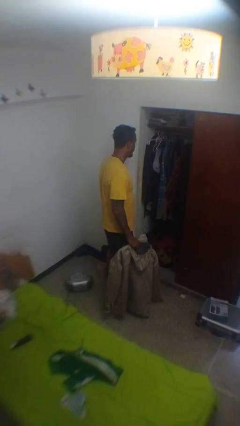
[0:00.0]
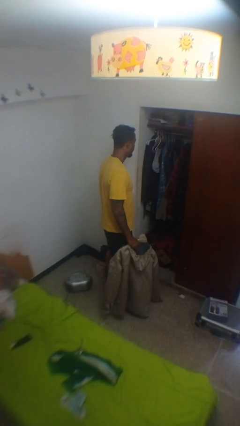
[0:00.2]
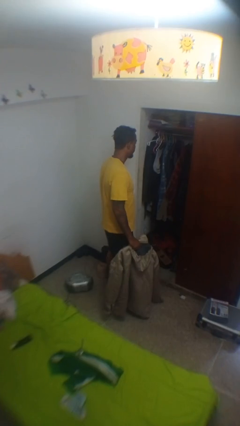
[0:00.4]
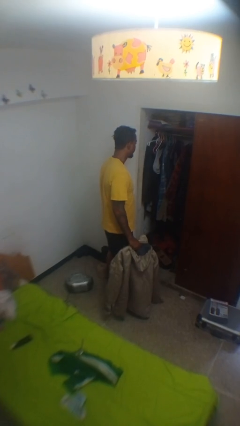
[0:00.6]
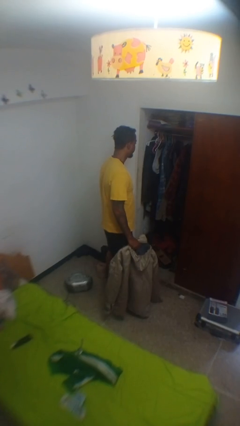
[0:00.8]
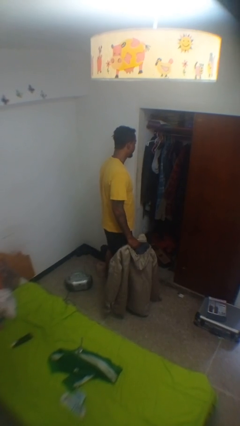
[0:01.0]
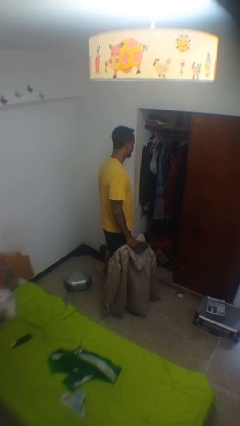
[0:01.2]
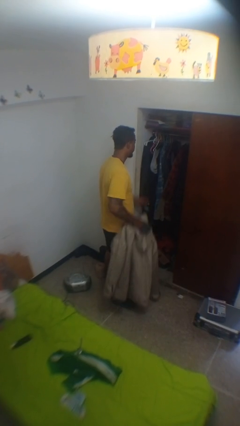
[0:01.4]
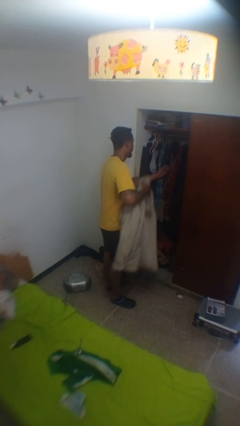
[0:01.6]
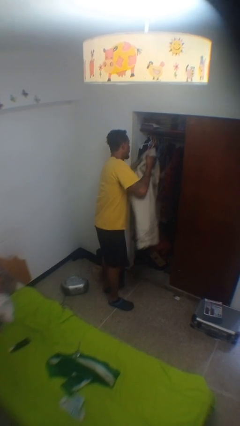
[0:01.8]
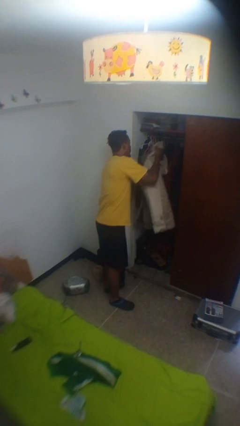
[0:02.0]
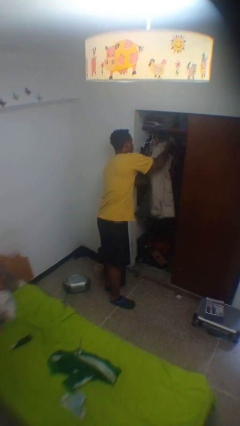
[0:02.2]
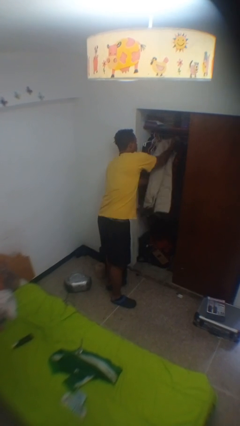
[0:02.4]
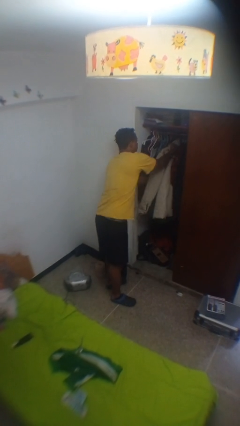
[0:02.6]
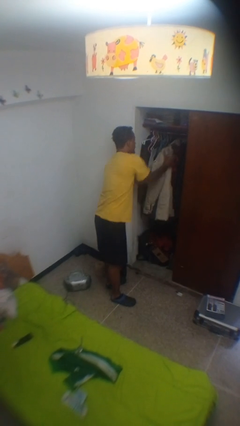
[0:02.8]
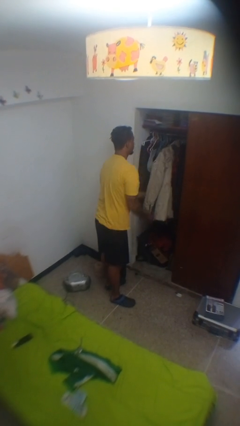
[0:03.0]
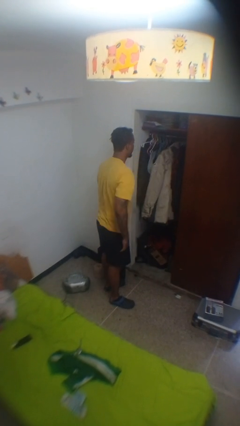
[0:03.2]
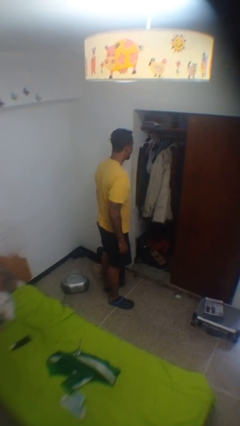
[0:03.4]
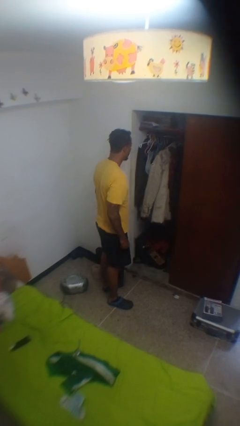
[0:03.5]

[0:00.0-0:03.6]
person puts clothes into closet

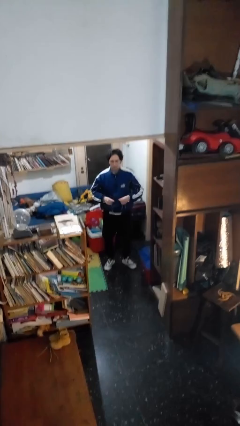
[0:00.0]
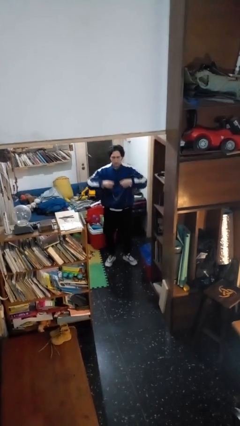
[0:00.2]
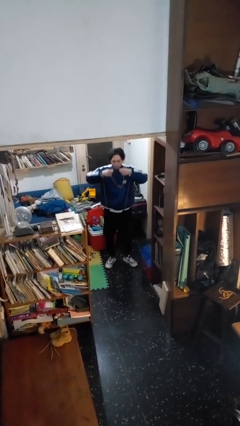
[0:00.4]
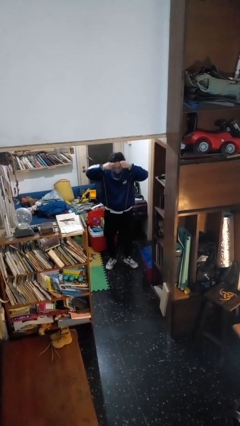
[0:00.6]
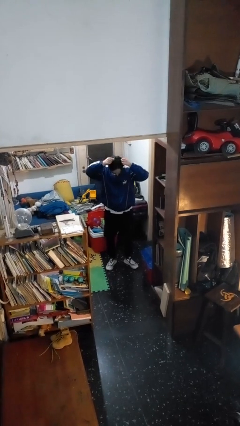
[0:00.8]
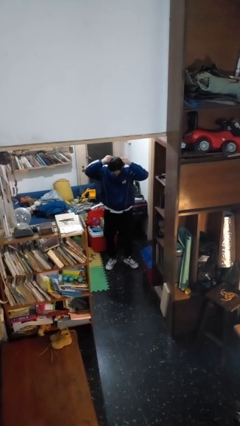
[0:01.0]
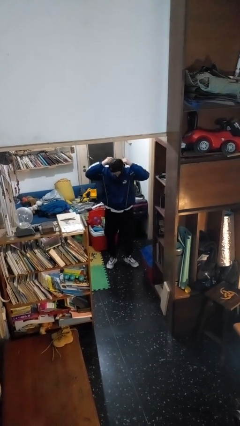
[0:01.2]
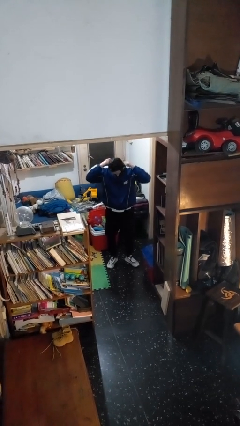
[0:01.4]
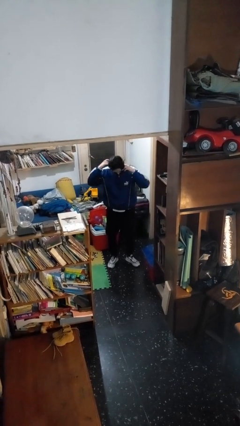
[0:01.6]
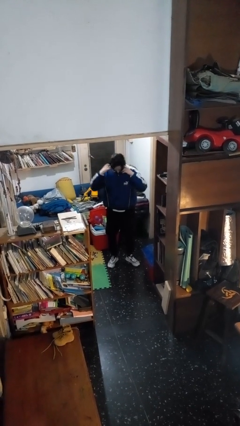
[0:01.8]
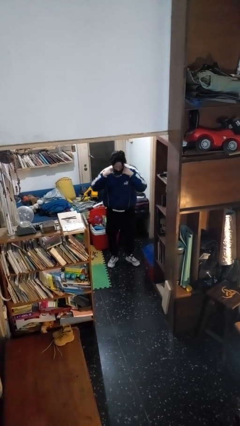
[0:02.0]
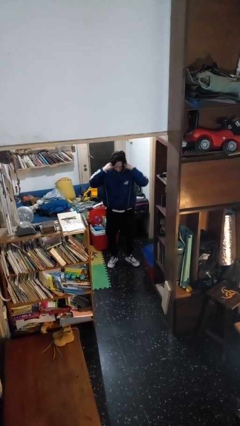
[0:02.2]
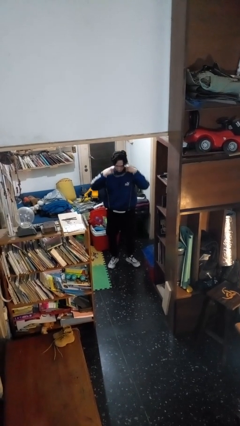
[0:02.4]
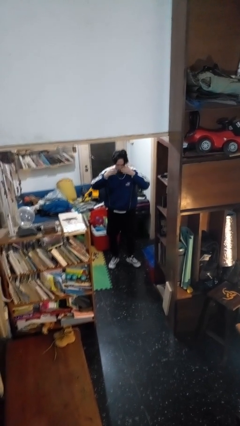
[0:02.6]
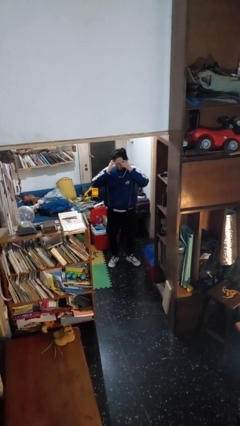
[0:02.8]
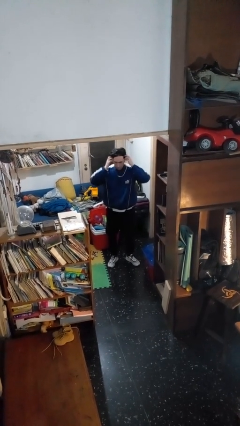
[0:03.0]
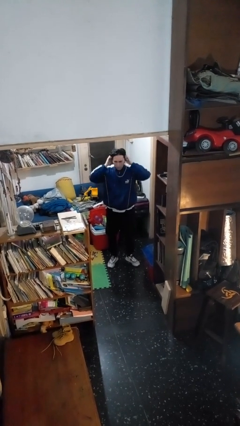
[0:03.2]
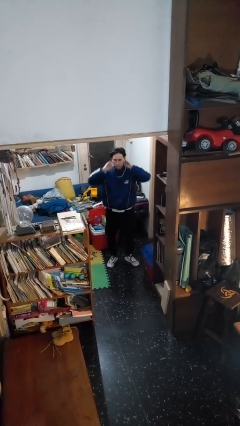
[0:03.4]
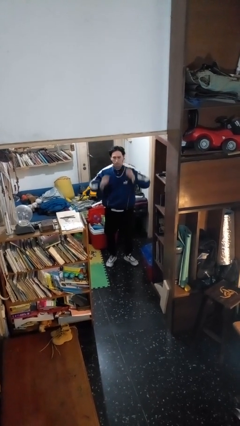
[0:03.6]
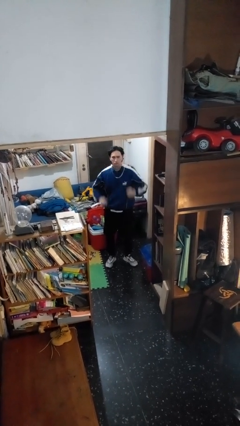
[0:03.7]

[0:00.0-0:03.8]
person puts on necklace

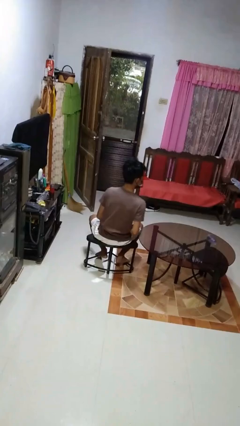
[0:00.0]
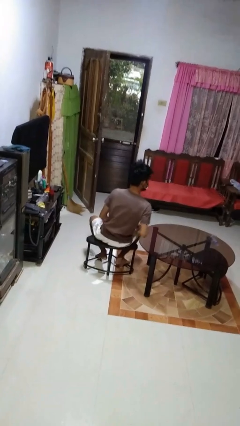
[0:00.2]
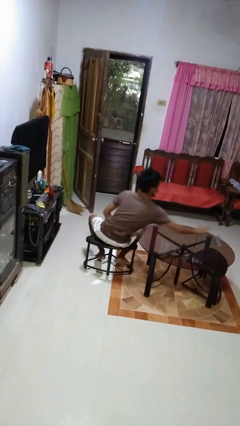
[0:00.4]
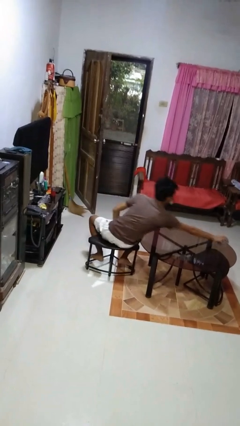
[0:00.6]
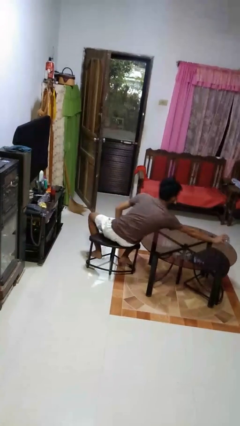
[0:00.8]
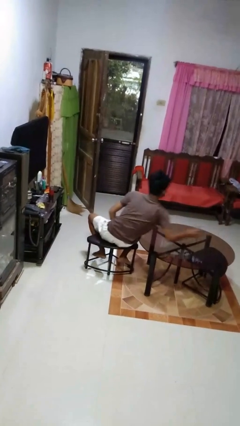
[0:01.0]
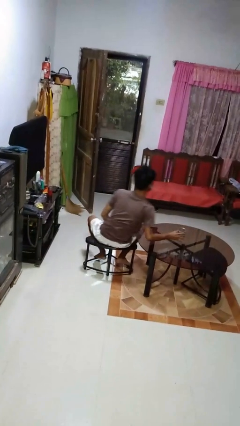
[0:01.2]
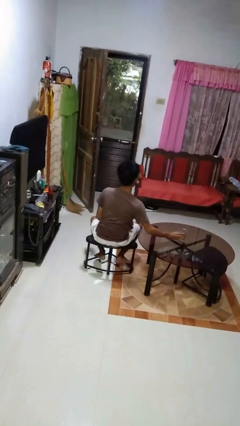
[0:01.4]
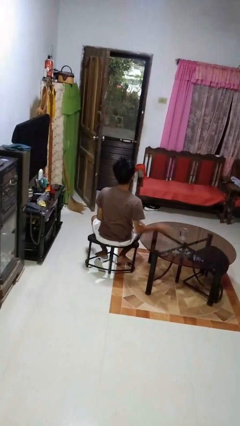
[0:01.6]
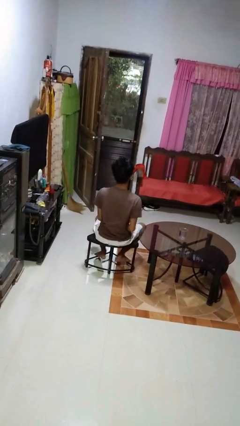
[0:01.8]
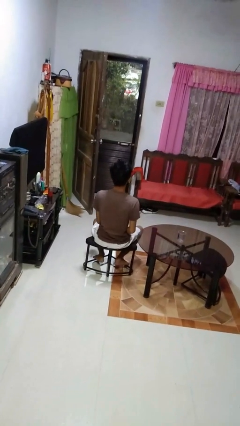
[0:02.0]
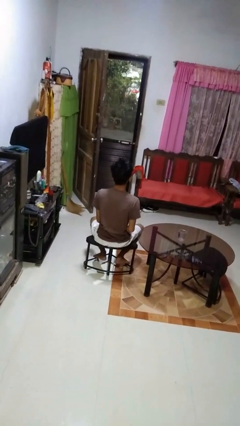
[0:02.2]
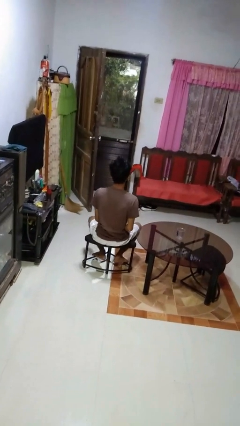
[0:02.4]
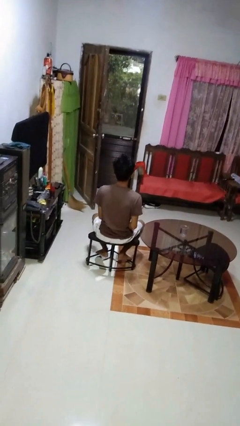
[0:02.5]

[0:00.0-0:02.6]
person sets upright glass

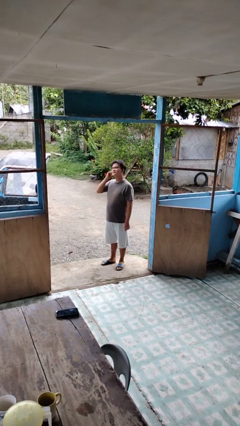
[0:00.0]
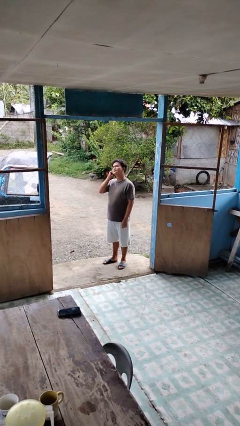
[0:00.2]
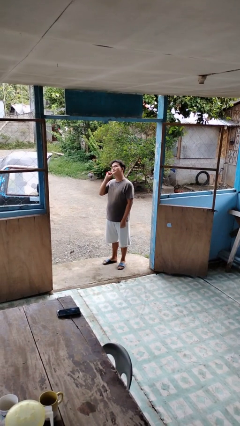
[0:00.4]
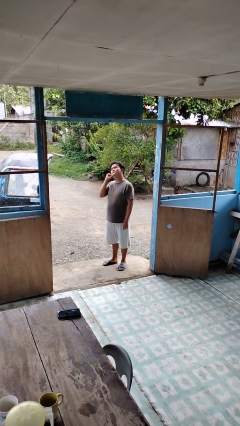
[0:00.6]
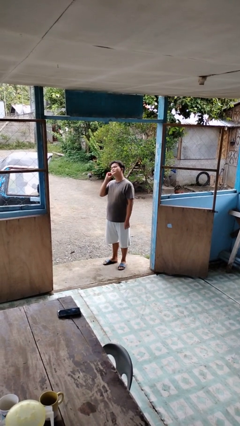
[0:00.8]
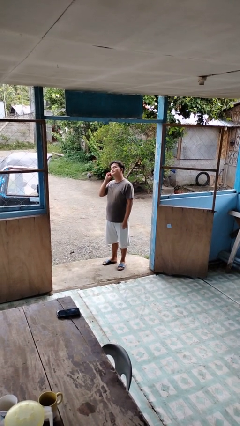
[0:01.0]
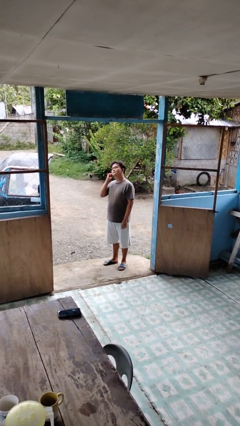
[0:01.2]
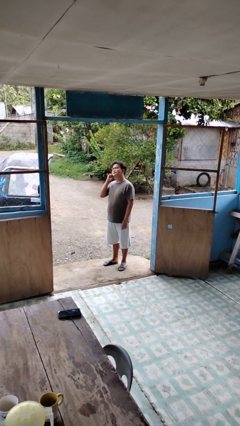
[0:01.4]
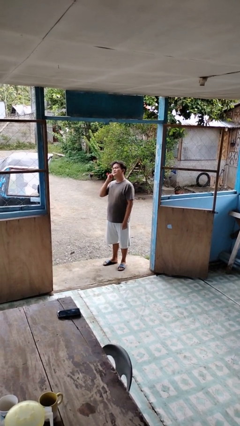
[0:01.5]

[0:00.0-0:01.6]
person touches earlobe

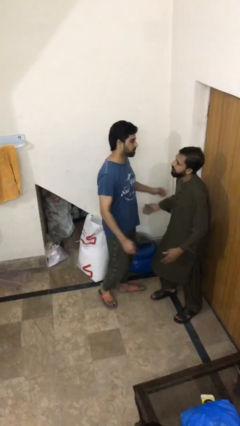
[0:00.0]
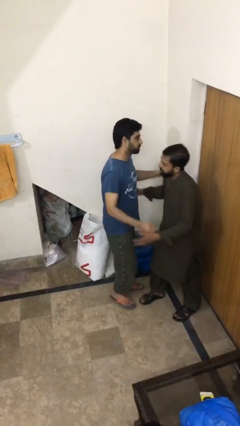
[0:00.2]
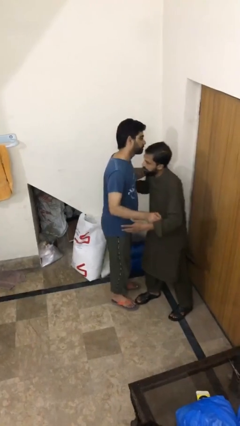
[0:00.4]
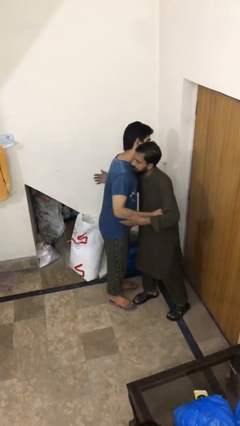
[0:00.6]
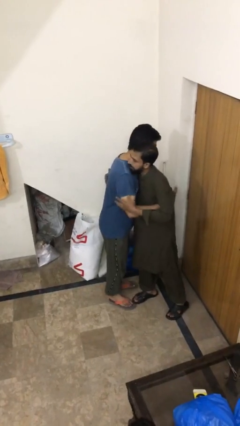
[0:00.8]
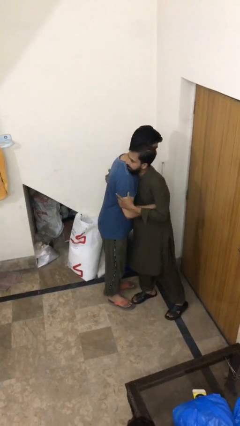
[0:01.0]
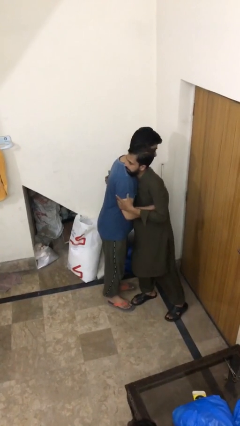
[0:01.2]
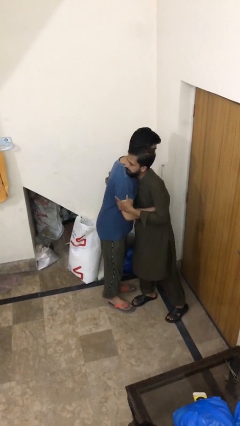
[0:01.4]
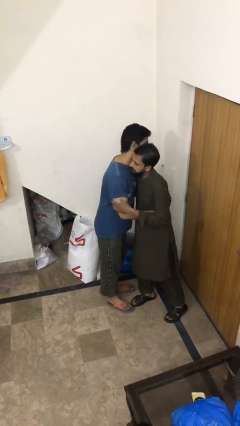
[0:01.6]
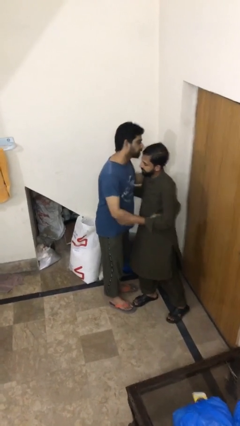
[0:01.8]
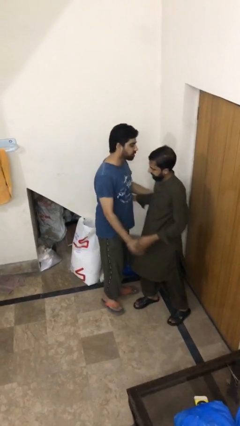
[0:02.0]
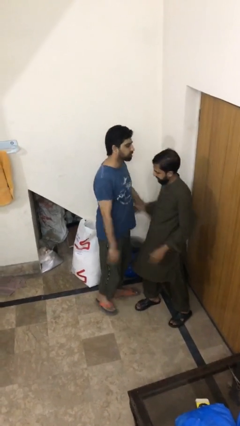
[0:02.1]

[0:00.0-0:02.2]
person embraces person

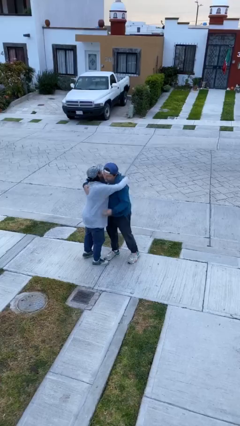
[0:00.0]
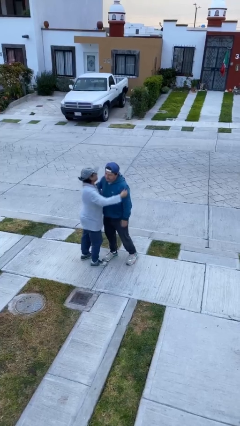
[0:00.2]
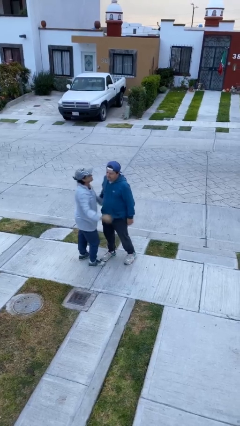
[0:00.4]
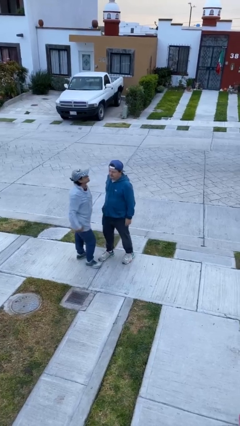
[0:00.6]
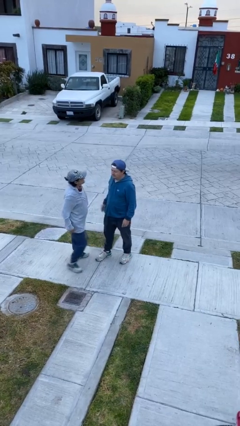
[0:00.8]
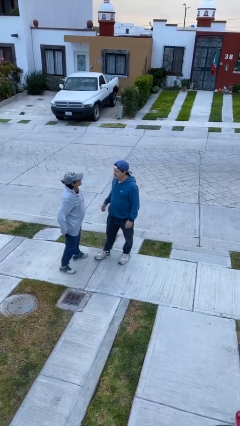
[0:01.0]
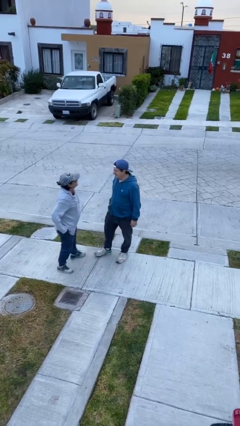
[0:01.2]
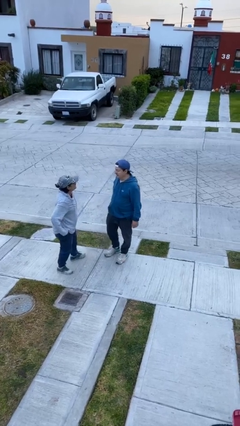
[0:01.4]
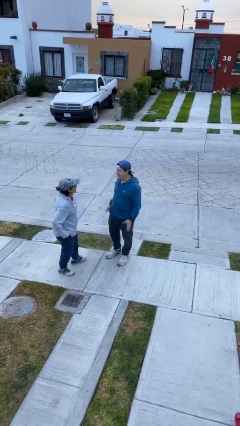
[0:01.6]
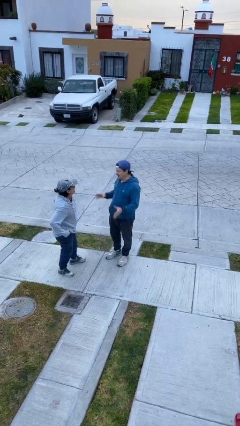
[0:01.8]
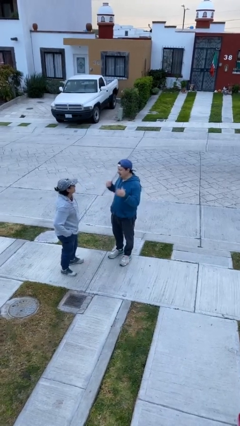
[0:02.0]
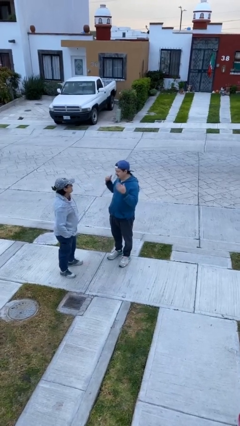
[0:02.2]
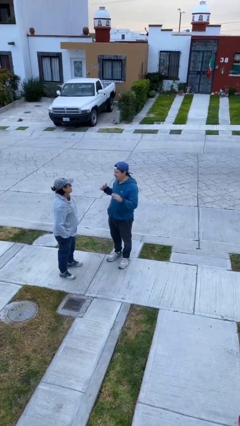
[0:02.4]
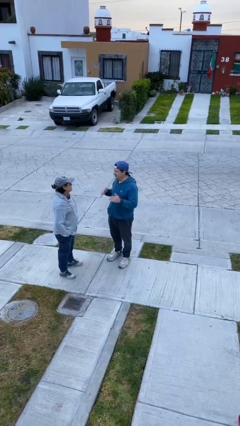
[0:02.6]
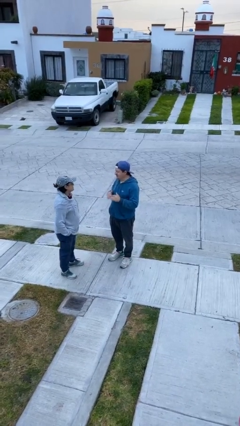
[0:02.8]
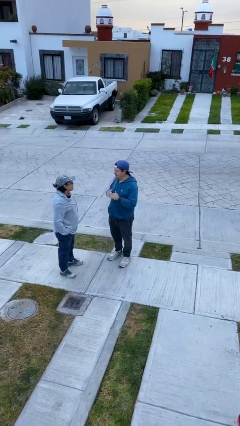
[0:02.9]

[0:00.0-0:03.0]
person talks to person

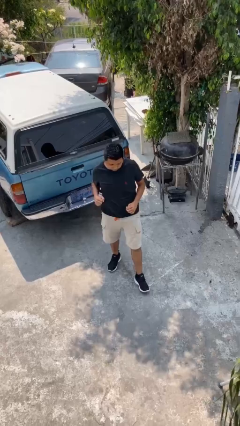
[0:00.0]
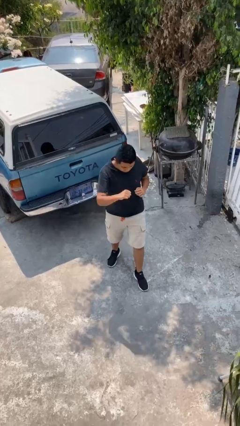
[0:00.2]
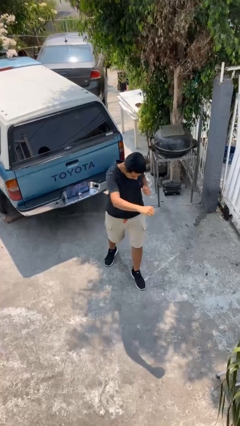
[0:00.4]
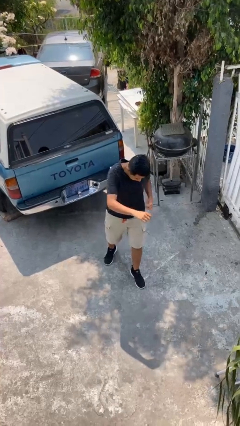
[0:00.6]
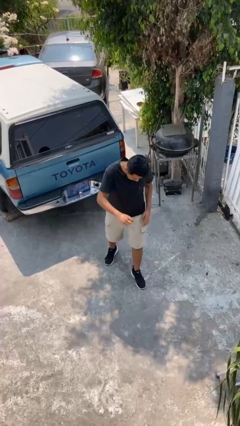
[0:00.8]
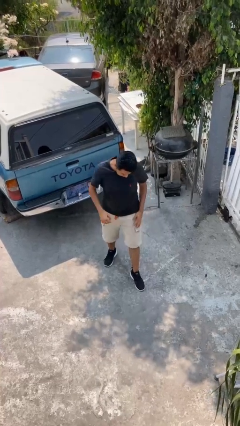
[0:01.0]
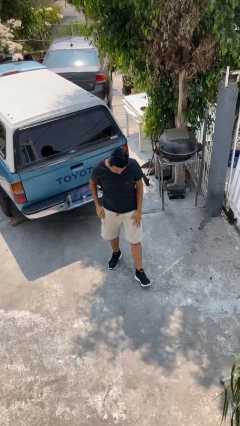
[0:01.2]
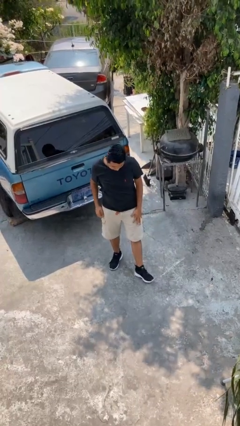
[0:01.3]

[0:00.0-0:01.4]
person punches
